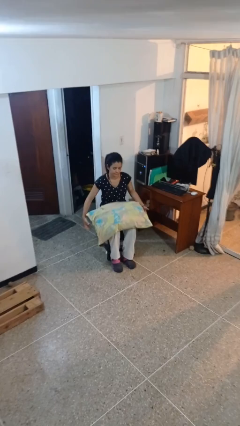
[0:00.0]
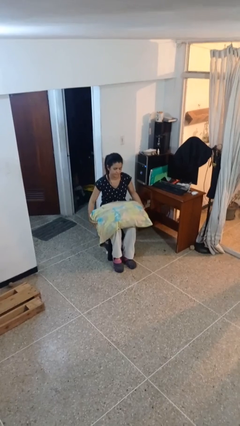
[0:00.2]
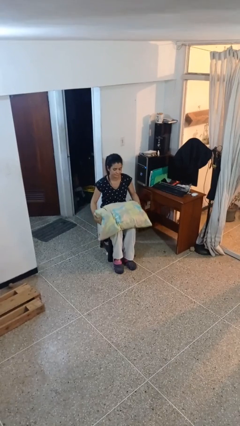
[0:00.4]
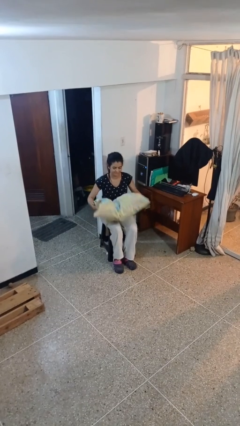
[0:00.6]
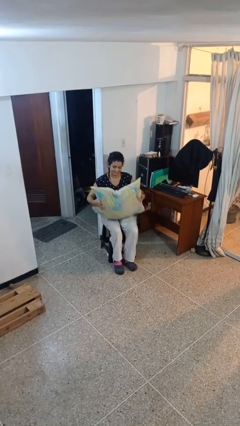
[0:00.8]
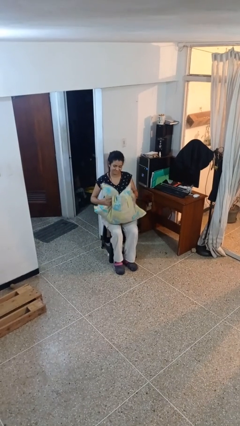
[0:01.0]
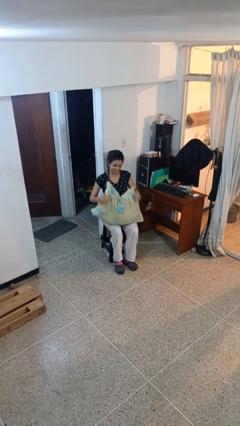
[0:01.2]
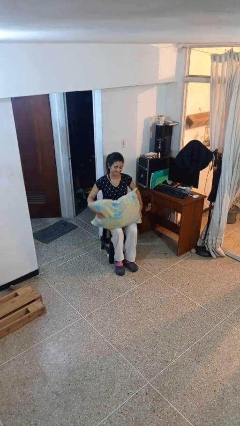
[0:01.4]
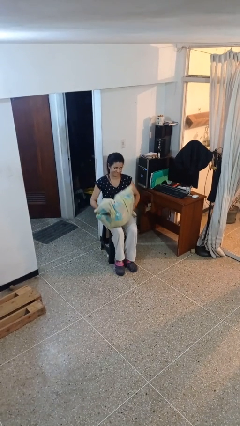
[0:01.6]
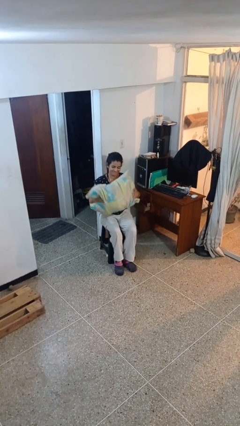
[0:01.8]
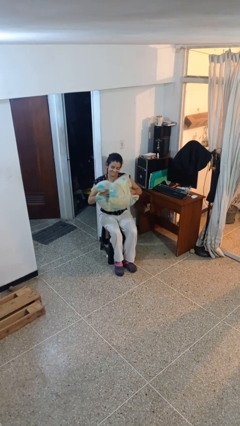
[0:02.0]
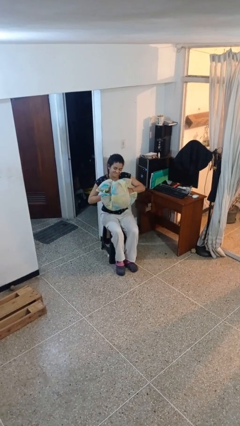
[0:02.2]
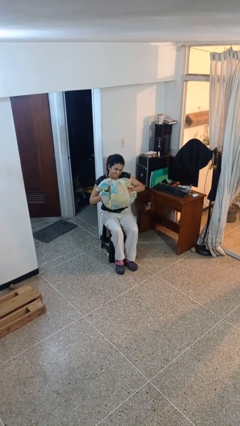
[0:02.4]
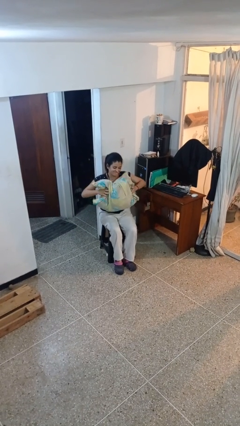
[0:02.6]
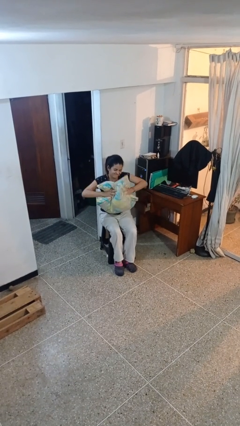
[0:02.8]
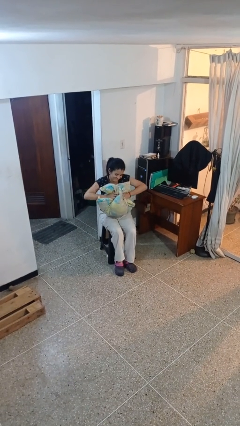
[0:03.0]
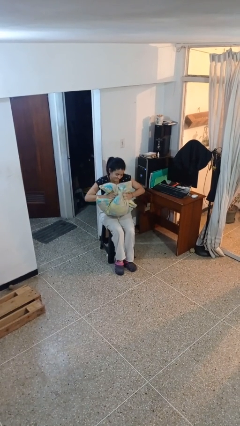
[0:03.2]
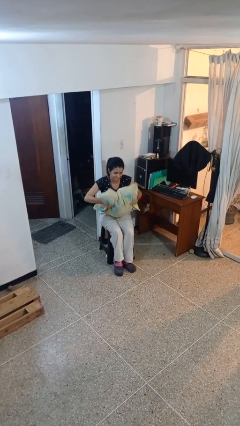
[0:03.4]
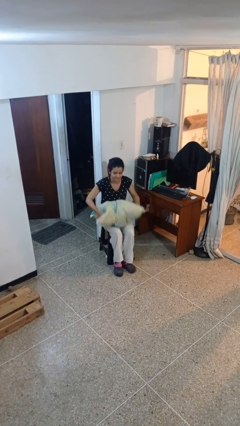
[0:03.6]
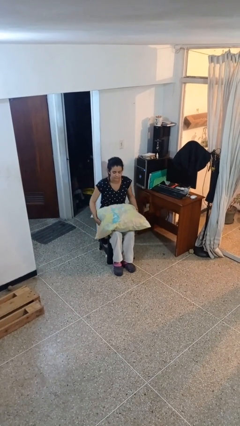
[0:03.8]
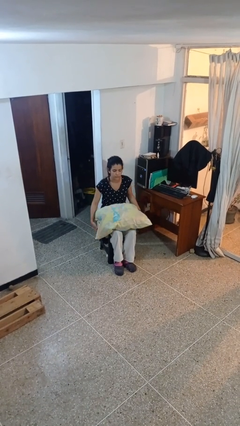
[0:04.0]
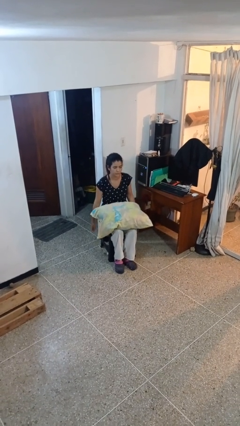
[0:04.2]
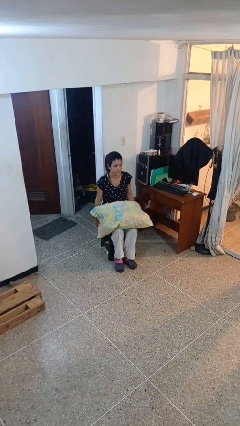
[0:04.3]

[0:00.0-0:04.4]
person squeezes object

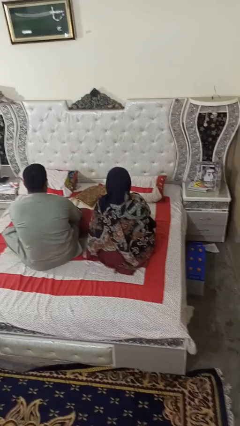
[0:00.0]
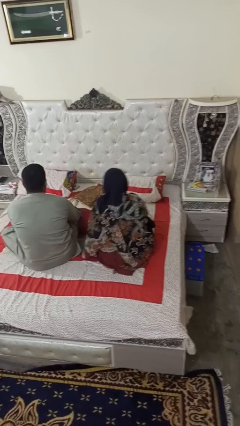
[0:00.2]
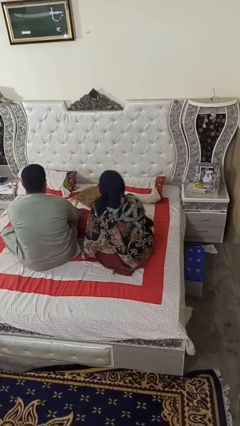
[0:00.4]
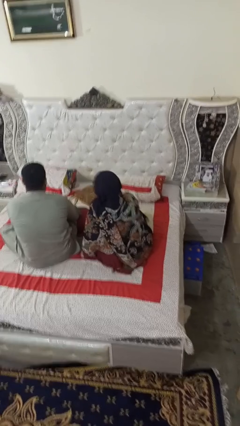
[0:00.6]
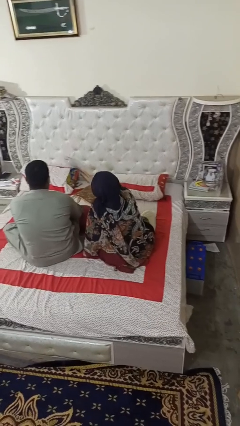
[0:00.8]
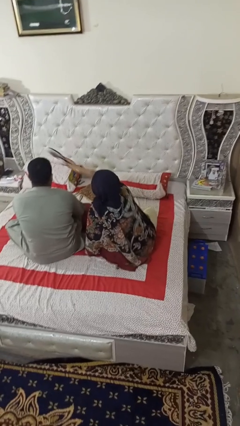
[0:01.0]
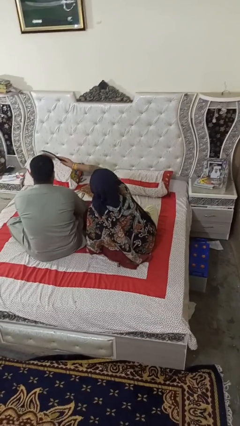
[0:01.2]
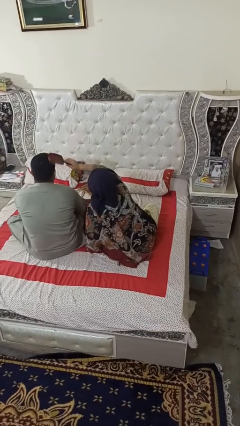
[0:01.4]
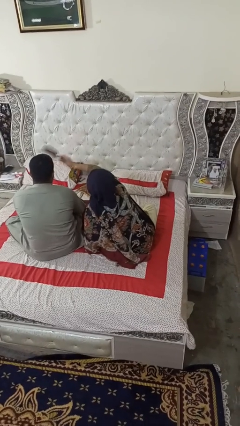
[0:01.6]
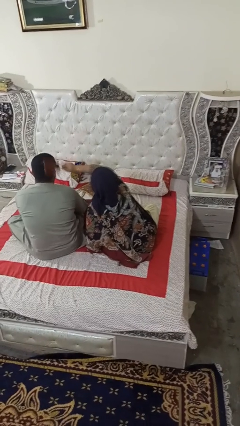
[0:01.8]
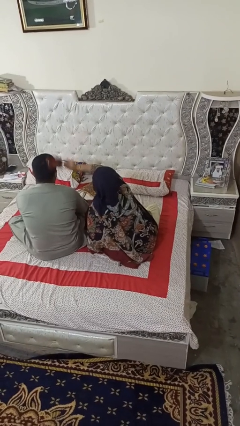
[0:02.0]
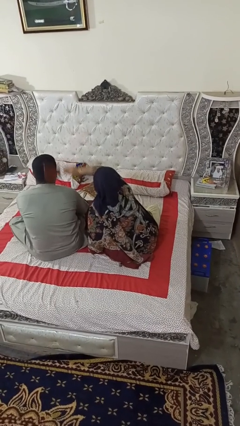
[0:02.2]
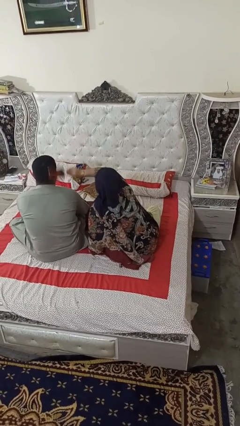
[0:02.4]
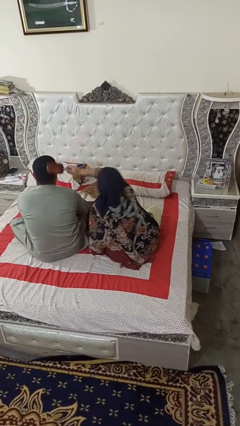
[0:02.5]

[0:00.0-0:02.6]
person brushes hair of person

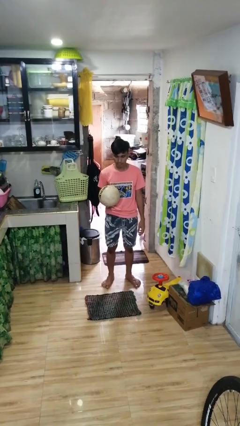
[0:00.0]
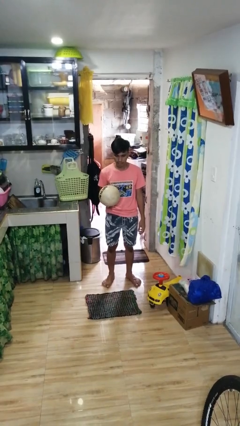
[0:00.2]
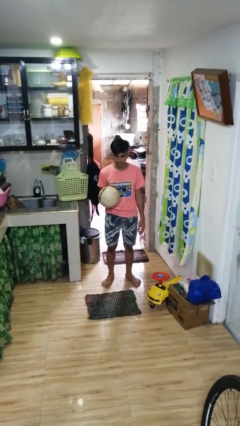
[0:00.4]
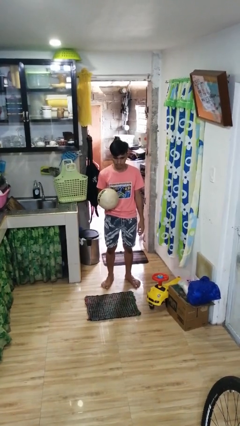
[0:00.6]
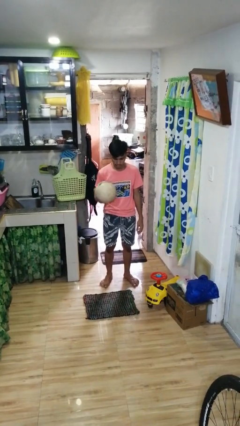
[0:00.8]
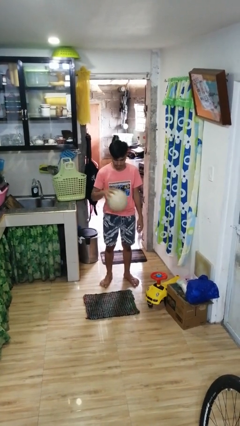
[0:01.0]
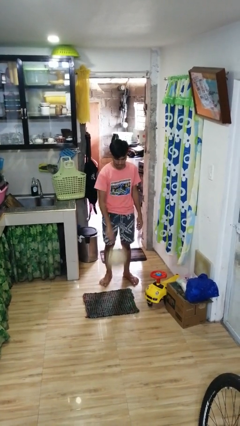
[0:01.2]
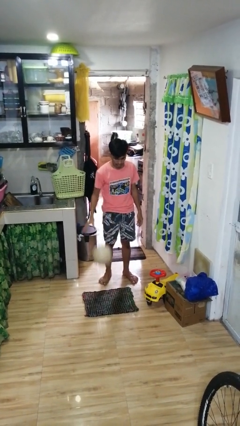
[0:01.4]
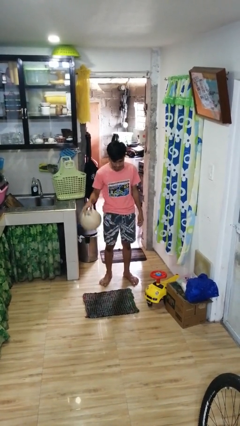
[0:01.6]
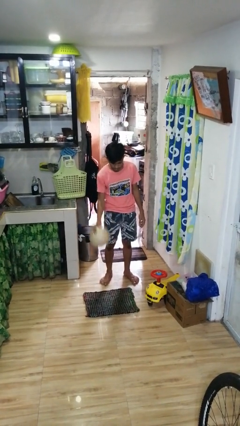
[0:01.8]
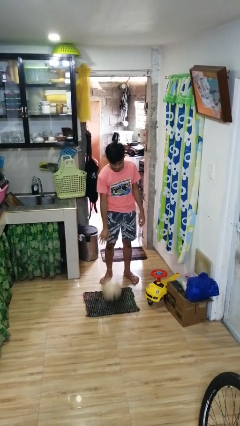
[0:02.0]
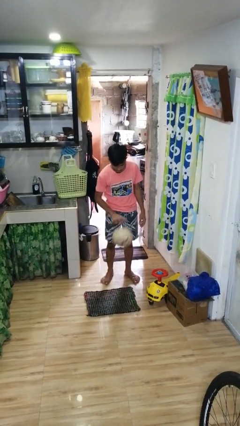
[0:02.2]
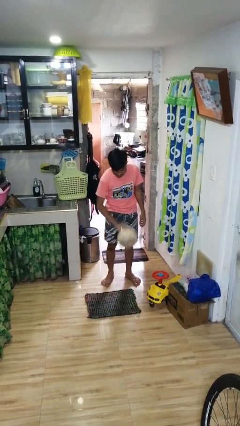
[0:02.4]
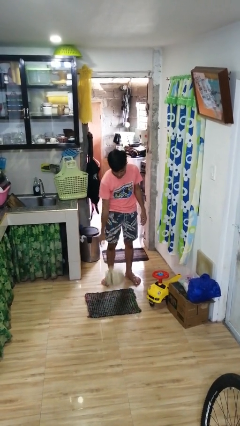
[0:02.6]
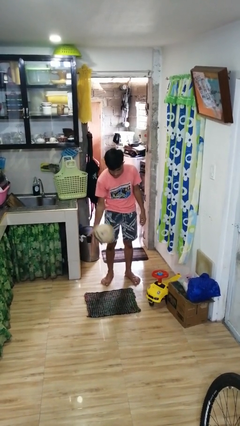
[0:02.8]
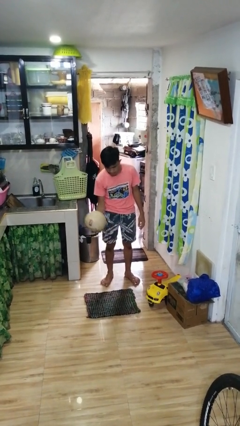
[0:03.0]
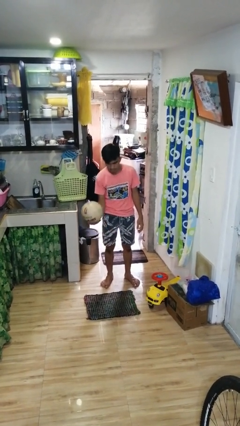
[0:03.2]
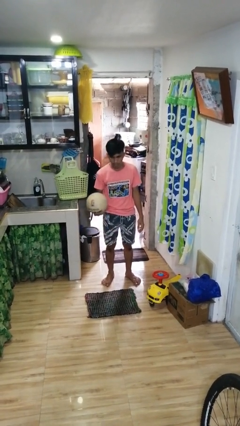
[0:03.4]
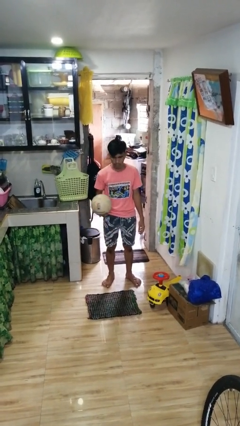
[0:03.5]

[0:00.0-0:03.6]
person bounces ball on floor

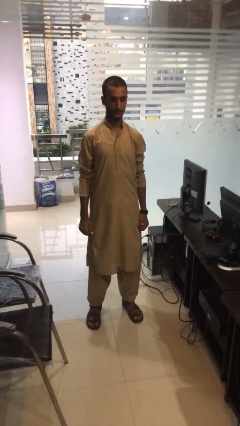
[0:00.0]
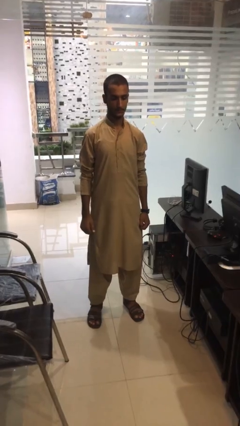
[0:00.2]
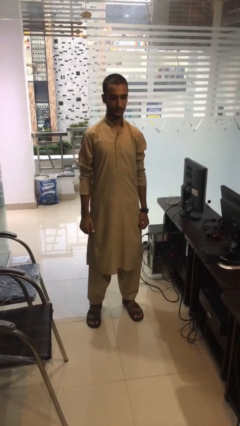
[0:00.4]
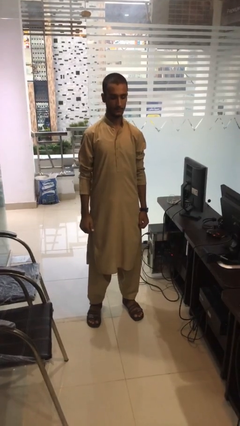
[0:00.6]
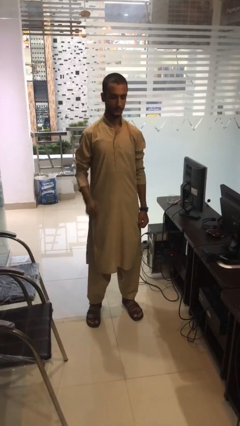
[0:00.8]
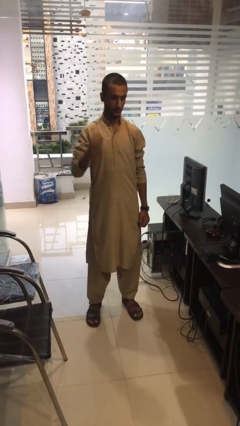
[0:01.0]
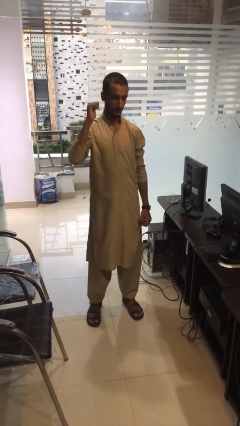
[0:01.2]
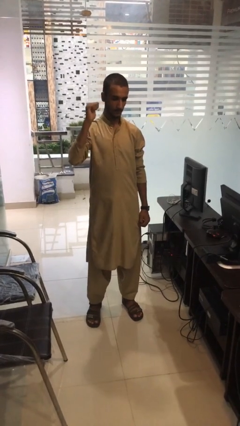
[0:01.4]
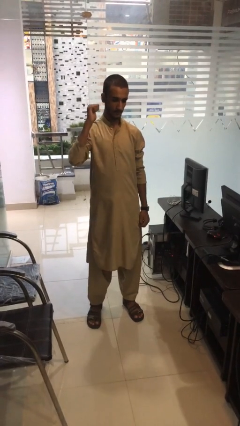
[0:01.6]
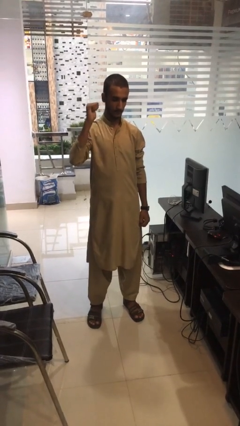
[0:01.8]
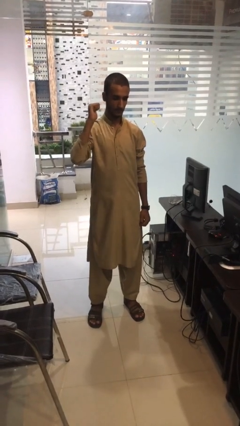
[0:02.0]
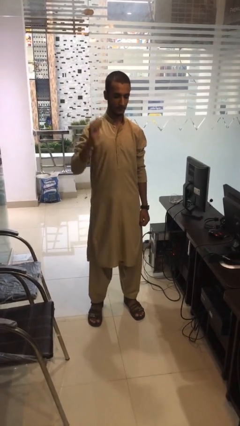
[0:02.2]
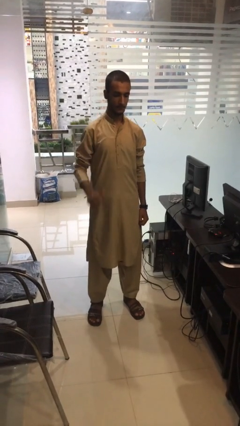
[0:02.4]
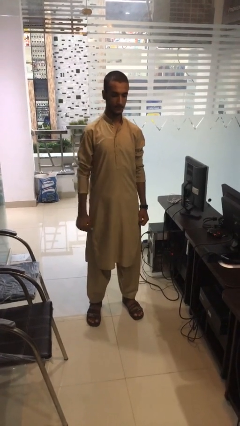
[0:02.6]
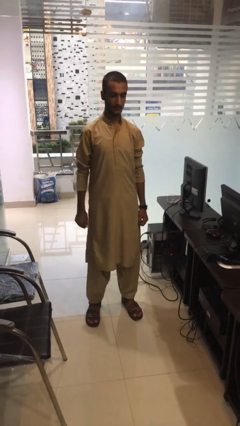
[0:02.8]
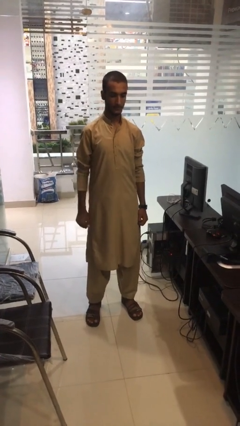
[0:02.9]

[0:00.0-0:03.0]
person gestures behind me

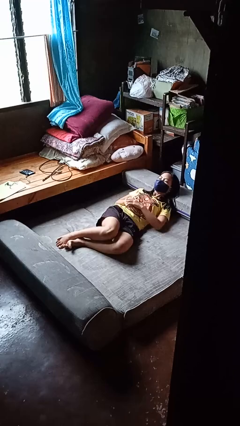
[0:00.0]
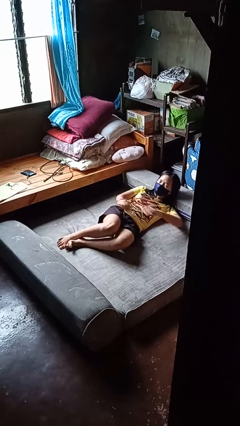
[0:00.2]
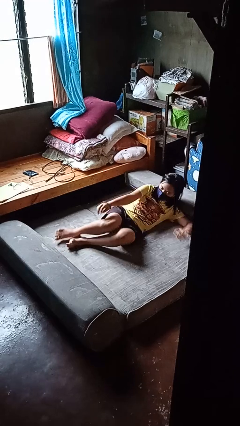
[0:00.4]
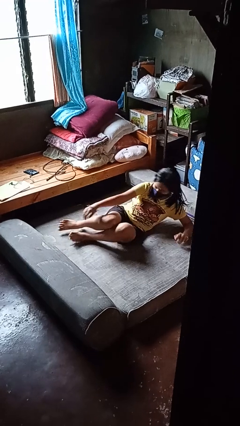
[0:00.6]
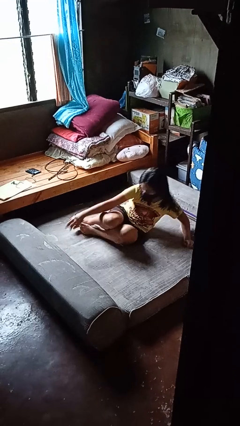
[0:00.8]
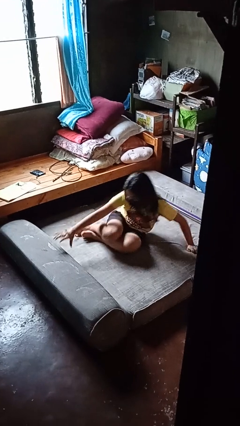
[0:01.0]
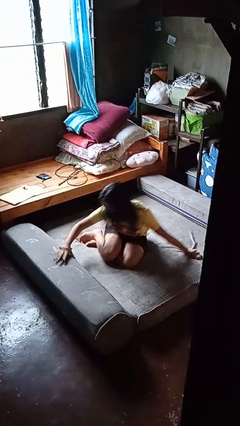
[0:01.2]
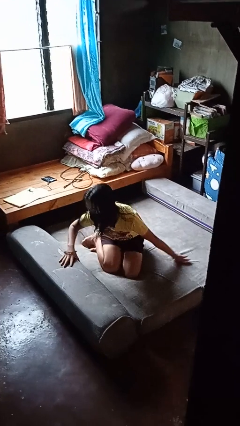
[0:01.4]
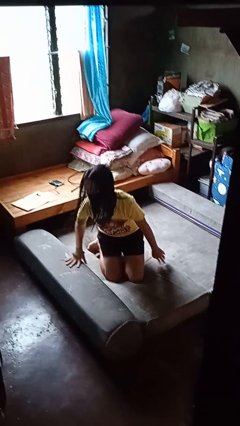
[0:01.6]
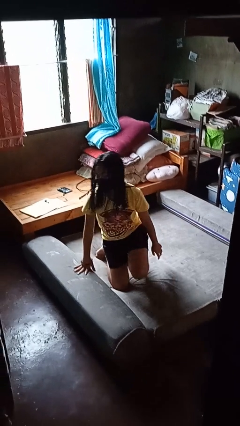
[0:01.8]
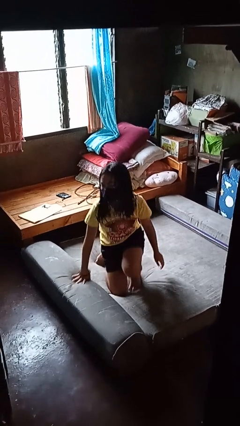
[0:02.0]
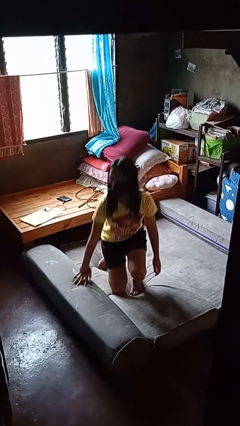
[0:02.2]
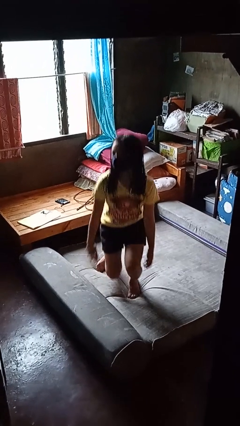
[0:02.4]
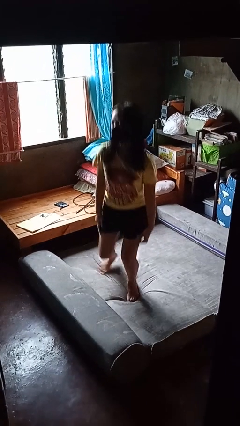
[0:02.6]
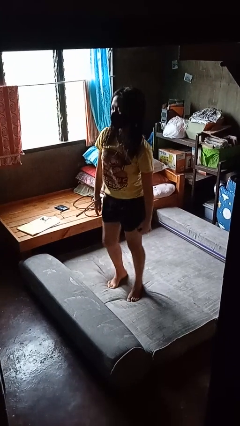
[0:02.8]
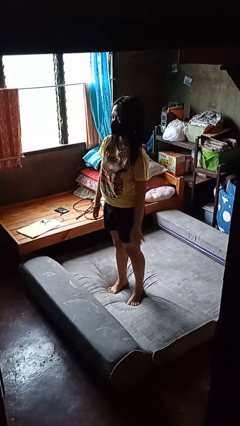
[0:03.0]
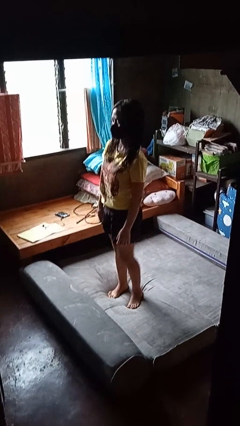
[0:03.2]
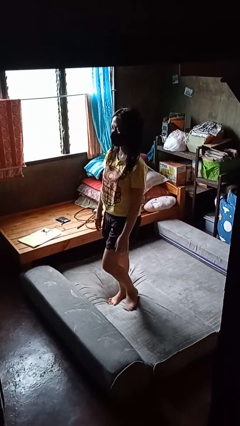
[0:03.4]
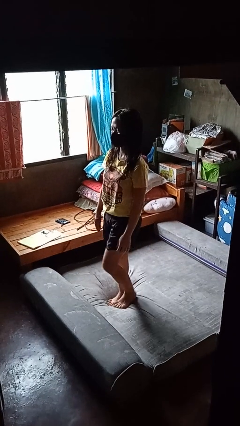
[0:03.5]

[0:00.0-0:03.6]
person stands up

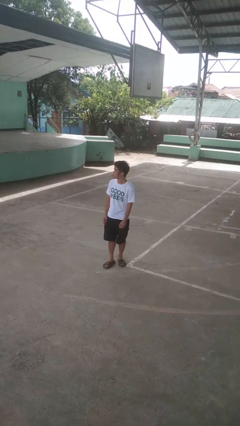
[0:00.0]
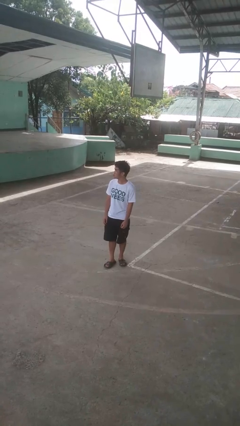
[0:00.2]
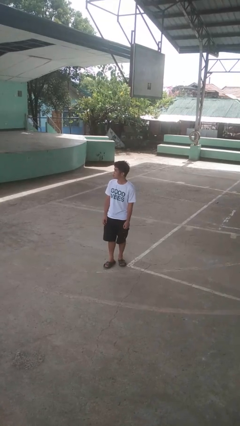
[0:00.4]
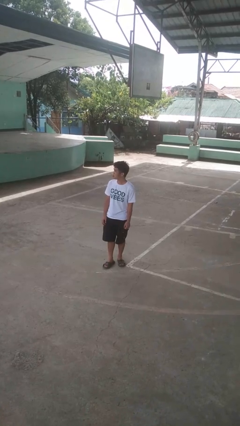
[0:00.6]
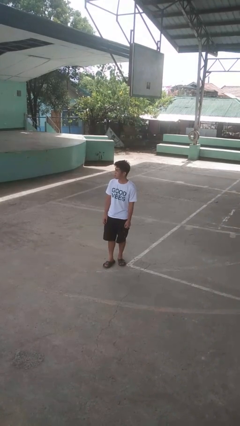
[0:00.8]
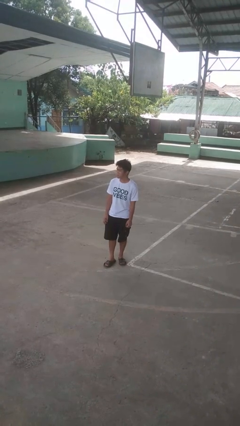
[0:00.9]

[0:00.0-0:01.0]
person sticks out tongue
